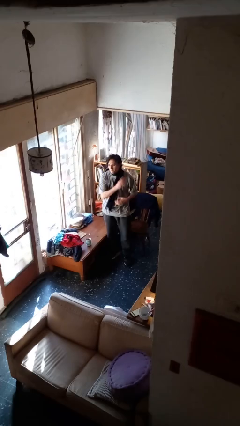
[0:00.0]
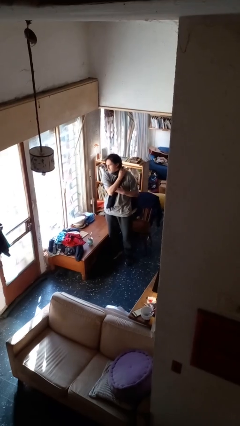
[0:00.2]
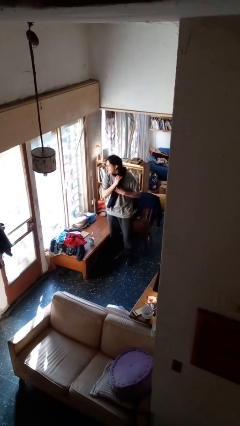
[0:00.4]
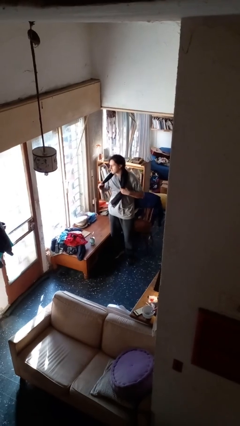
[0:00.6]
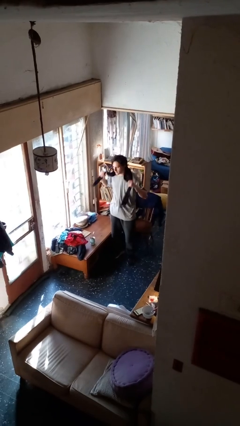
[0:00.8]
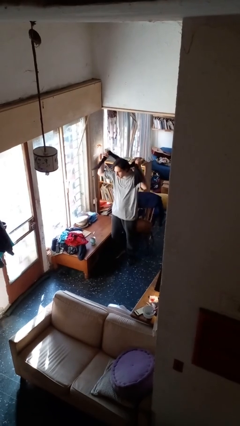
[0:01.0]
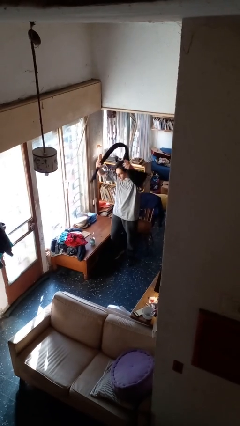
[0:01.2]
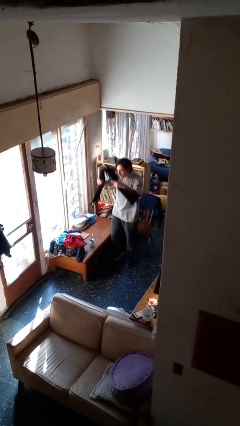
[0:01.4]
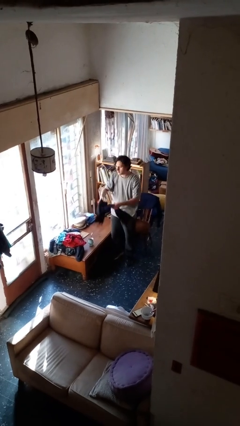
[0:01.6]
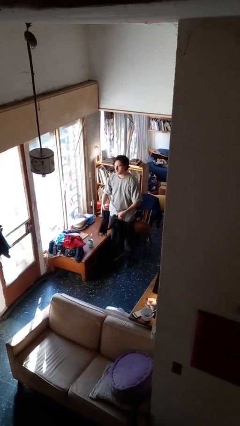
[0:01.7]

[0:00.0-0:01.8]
person takes off scarf

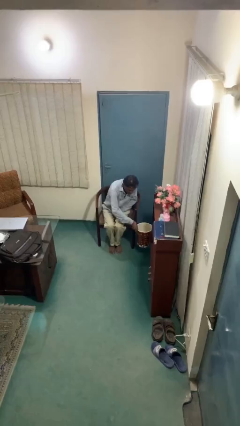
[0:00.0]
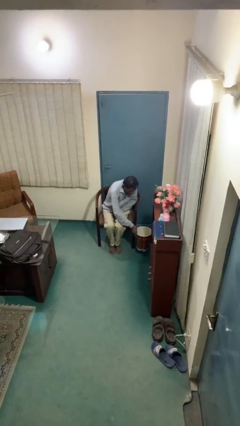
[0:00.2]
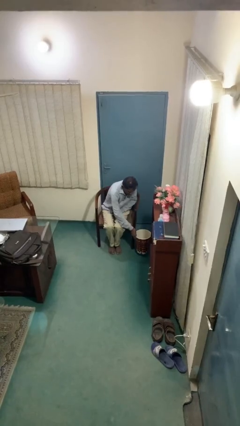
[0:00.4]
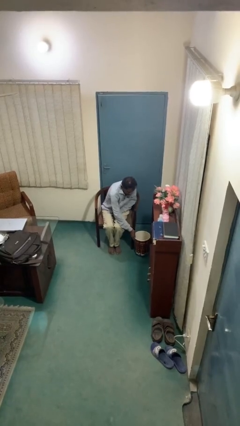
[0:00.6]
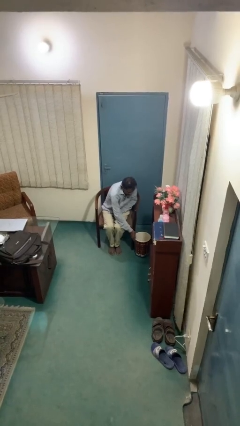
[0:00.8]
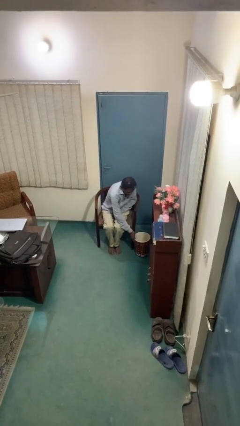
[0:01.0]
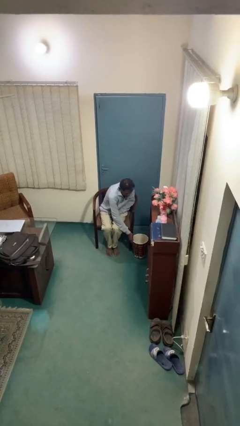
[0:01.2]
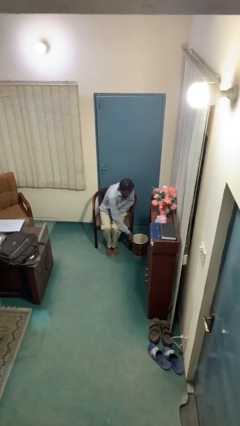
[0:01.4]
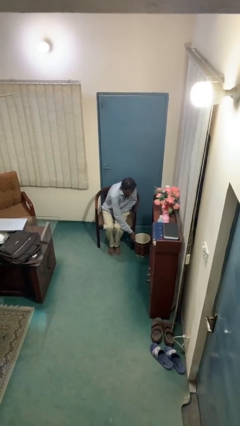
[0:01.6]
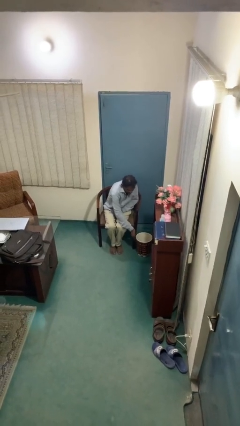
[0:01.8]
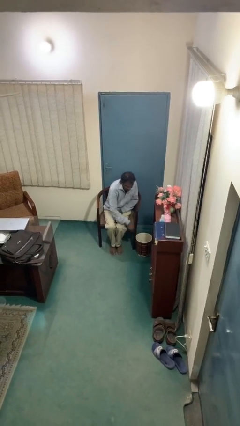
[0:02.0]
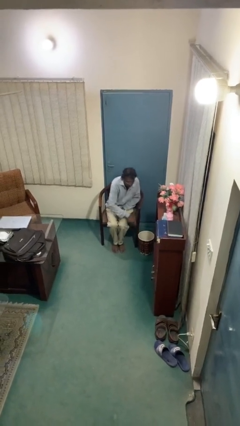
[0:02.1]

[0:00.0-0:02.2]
person puts down object on floor

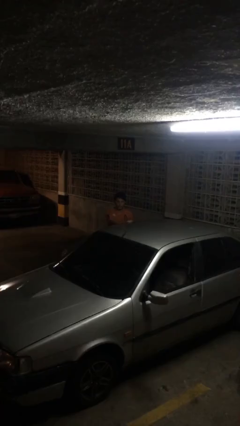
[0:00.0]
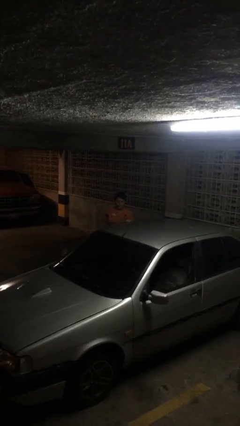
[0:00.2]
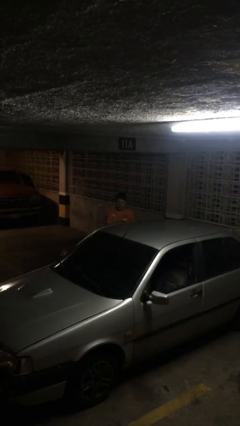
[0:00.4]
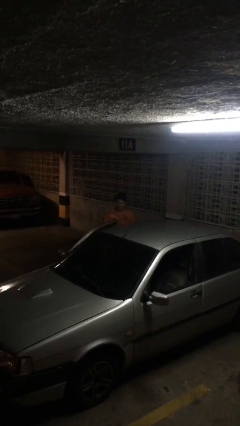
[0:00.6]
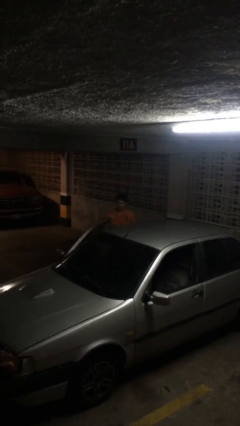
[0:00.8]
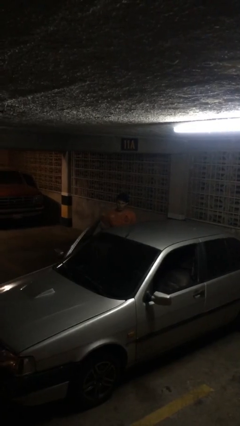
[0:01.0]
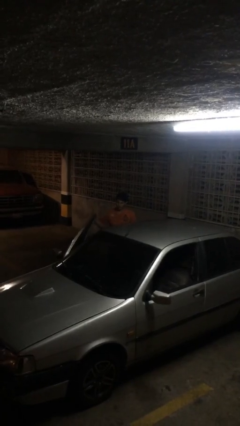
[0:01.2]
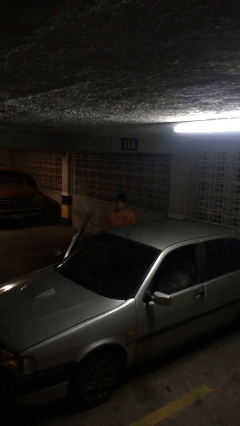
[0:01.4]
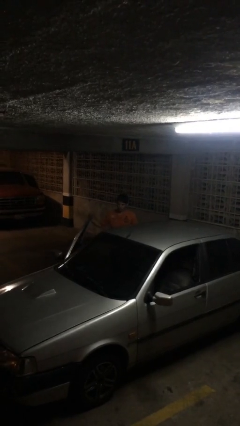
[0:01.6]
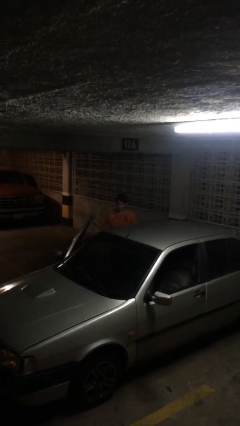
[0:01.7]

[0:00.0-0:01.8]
person opens car door

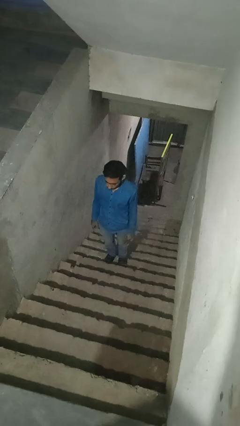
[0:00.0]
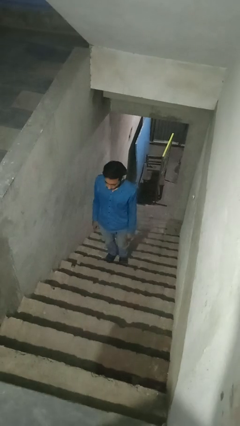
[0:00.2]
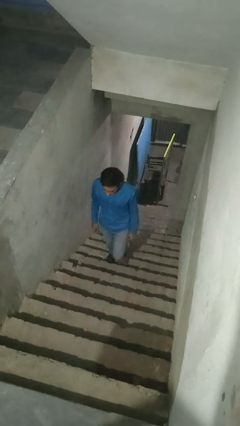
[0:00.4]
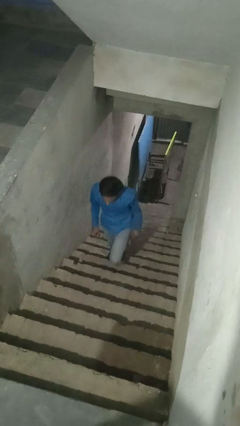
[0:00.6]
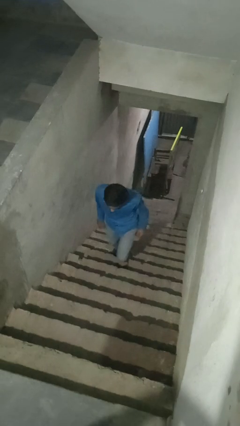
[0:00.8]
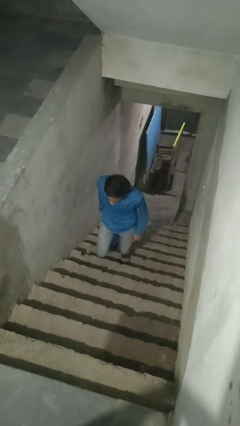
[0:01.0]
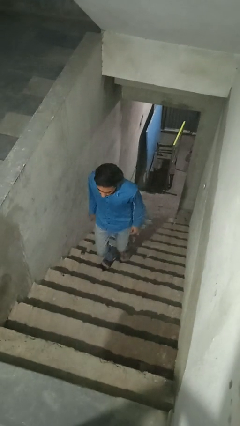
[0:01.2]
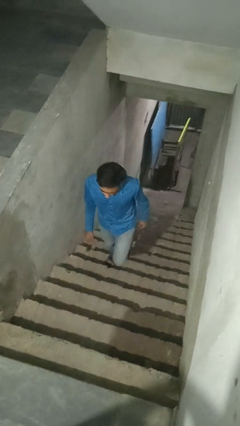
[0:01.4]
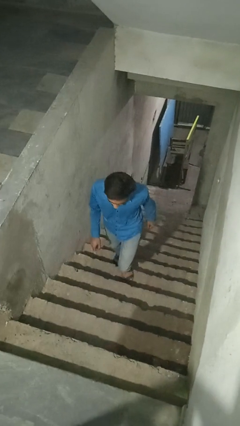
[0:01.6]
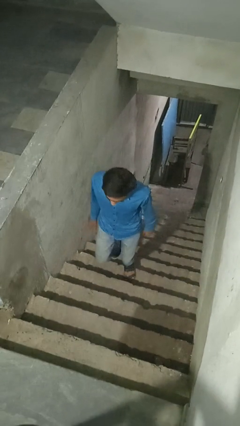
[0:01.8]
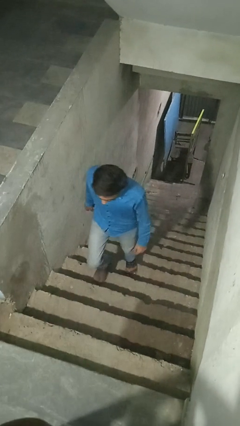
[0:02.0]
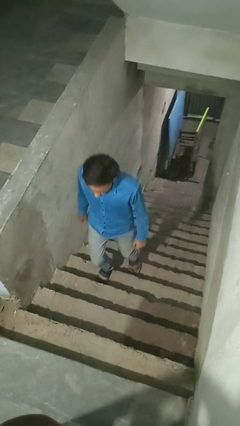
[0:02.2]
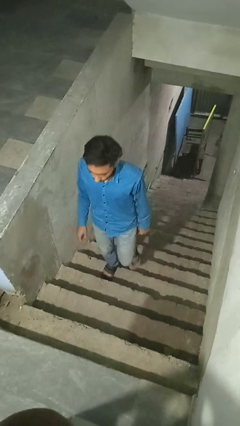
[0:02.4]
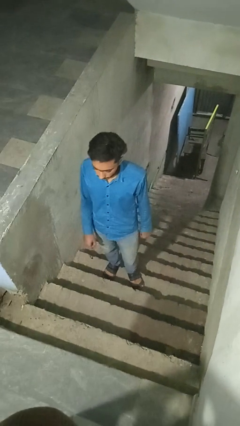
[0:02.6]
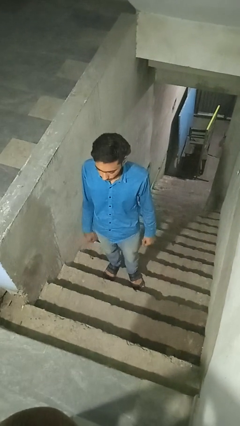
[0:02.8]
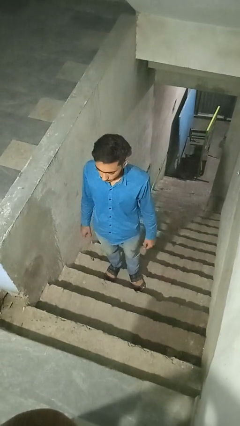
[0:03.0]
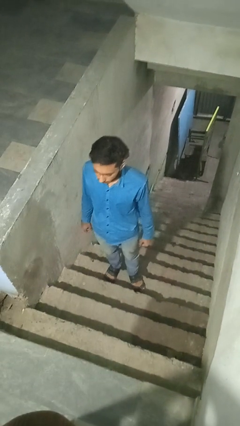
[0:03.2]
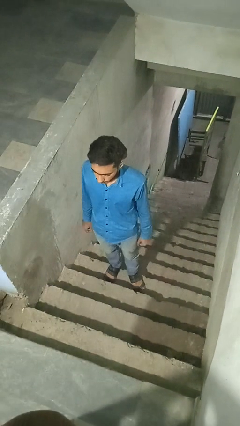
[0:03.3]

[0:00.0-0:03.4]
person climbs up stairs

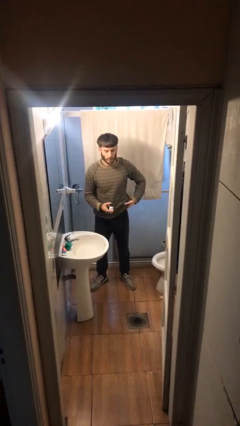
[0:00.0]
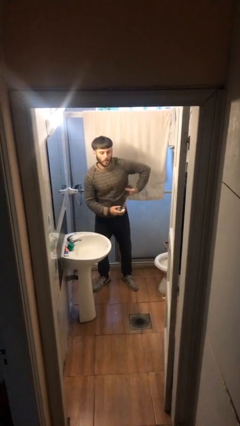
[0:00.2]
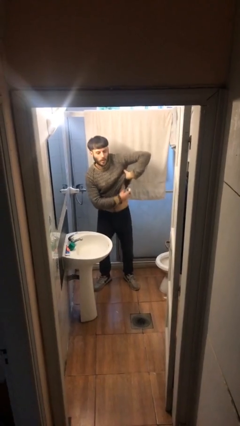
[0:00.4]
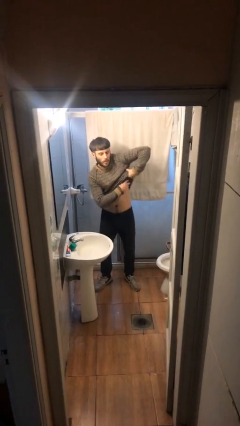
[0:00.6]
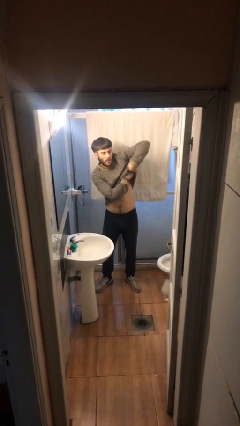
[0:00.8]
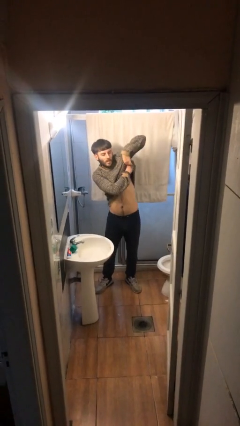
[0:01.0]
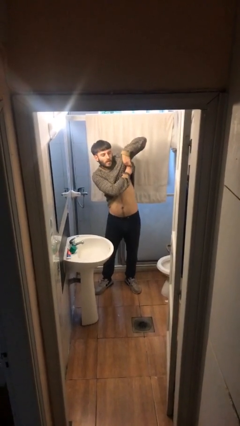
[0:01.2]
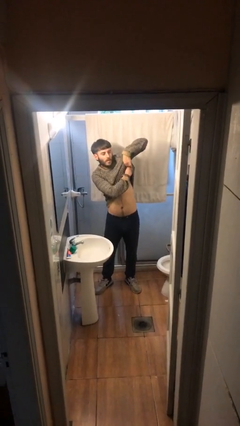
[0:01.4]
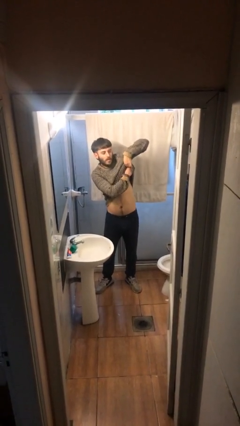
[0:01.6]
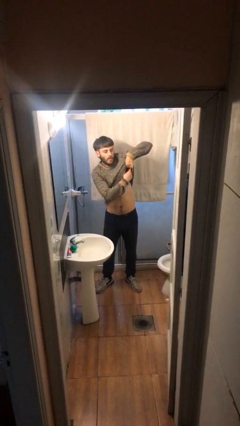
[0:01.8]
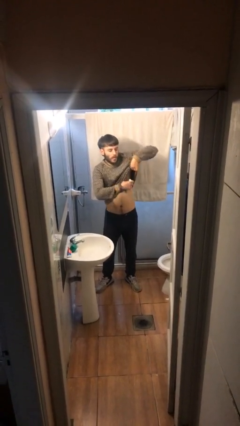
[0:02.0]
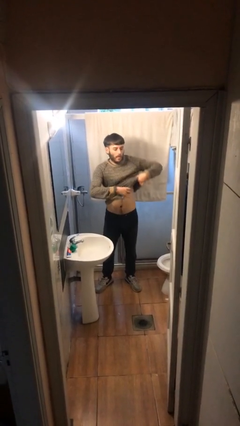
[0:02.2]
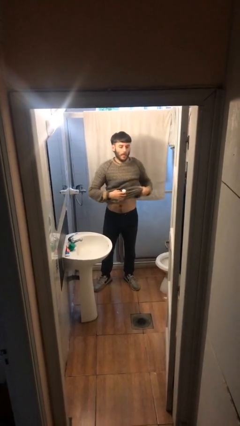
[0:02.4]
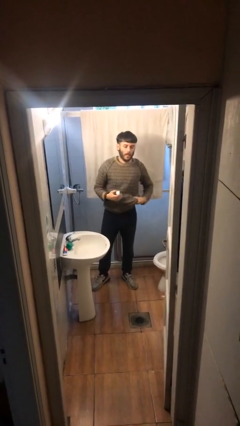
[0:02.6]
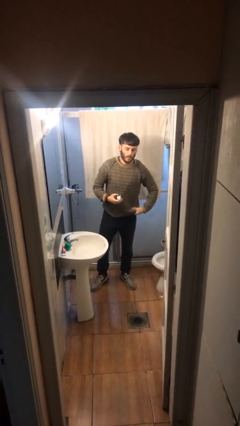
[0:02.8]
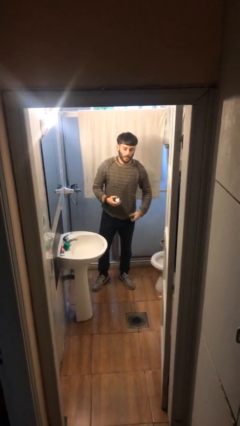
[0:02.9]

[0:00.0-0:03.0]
person applies deodorant

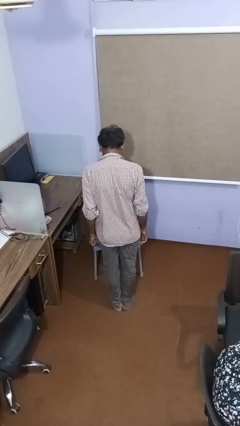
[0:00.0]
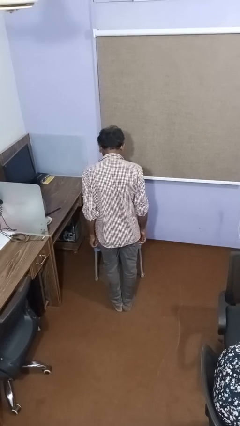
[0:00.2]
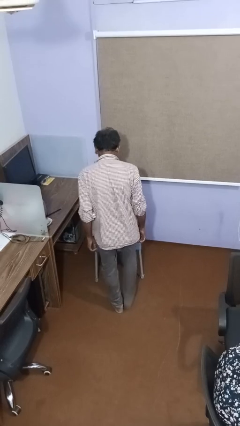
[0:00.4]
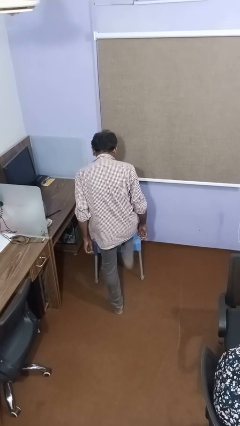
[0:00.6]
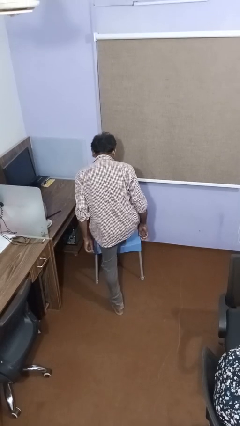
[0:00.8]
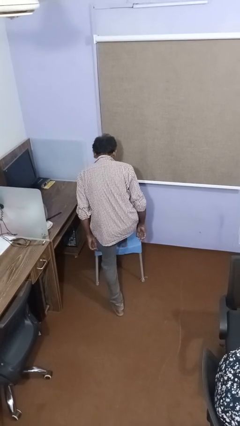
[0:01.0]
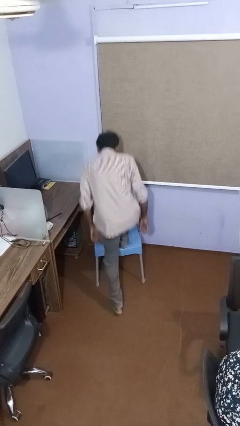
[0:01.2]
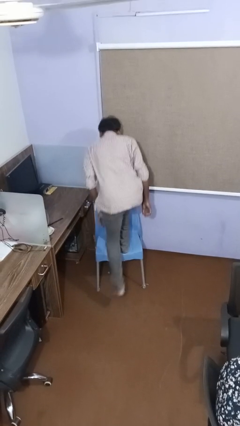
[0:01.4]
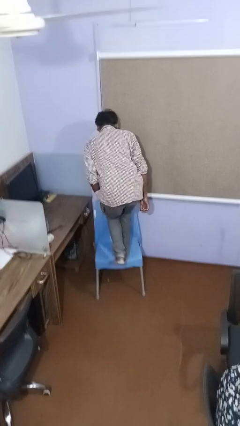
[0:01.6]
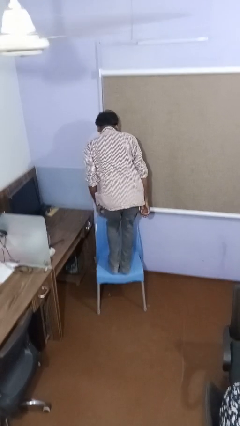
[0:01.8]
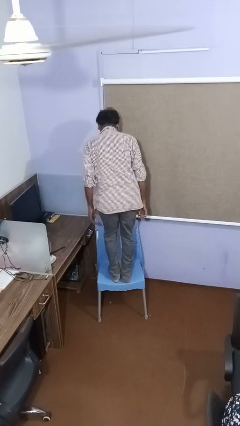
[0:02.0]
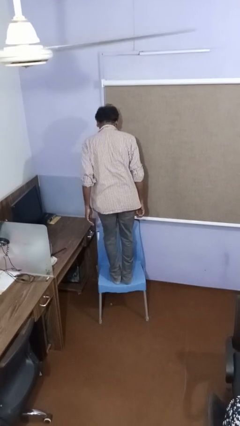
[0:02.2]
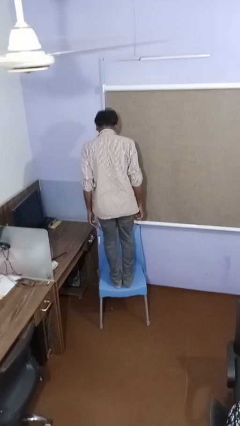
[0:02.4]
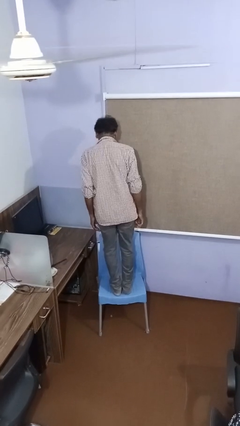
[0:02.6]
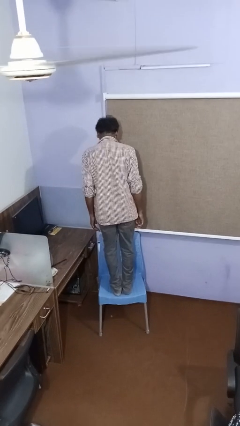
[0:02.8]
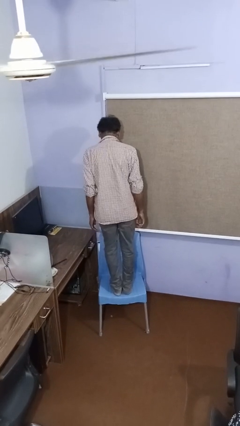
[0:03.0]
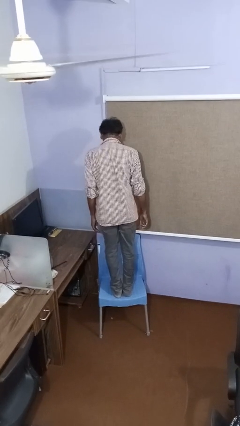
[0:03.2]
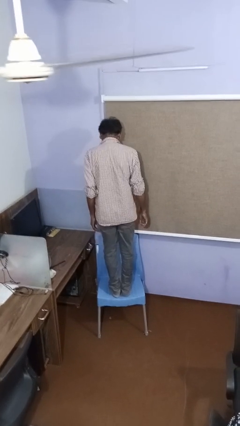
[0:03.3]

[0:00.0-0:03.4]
person climbs on chair

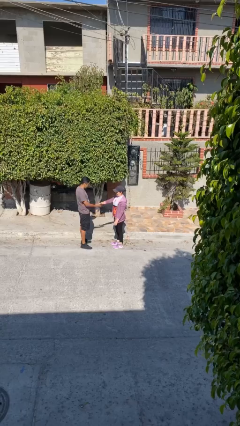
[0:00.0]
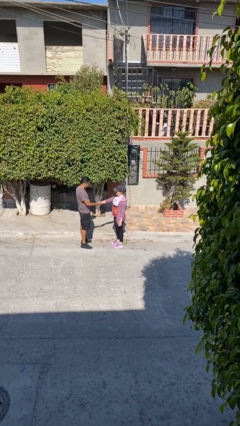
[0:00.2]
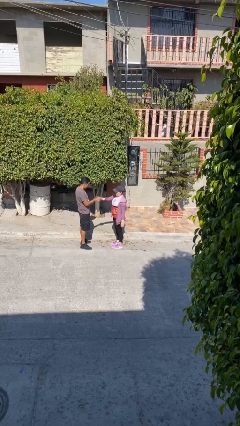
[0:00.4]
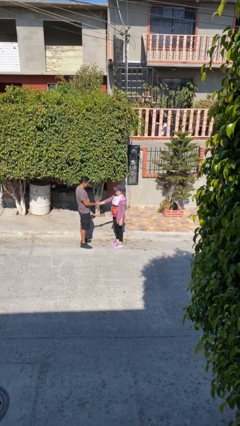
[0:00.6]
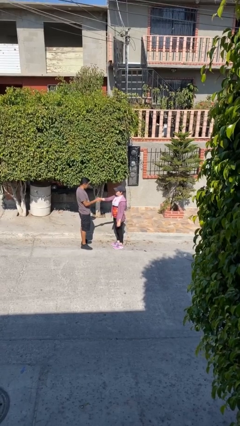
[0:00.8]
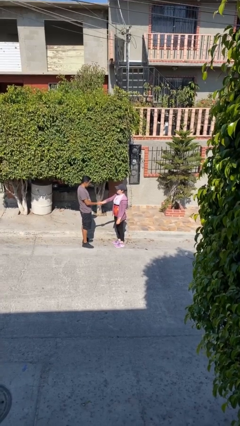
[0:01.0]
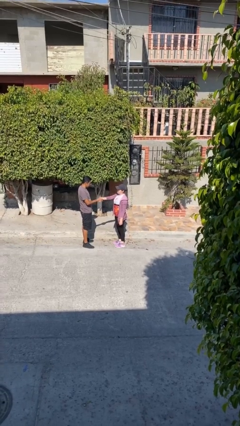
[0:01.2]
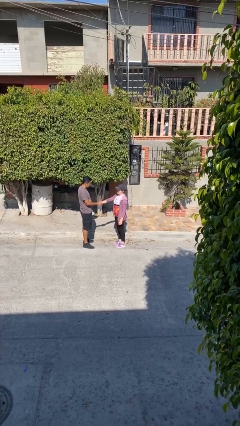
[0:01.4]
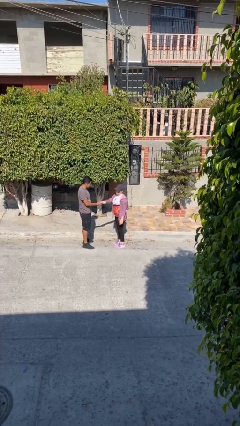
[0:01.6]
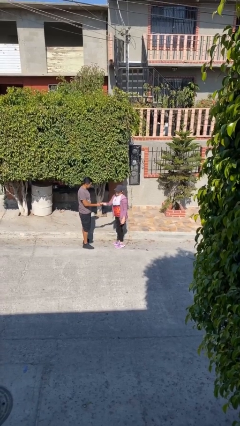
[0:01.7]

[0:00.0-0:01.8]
person shakes hand
